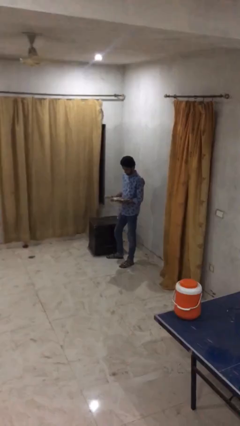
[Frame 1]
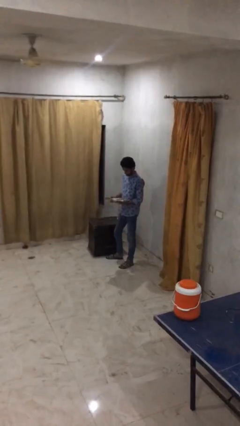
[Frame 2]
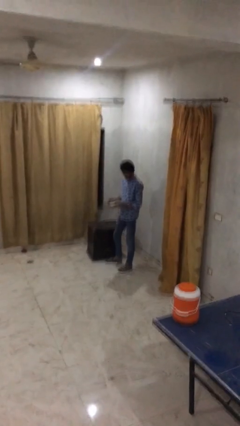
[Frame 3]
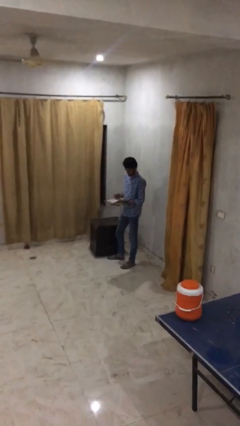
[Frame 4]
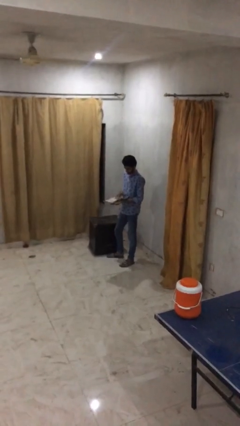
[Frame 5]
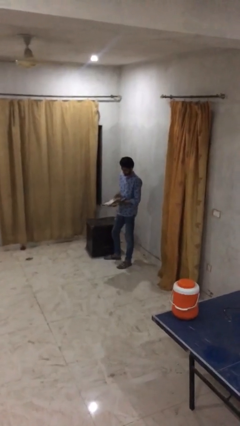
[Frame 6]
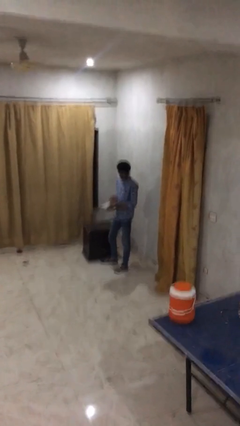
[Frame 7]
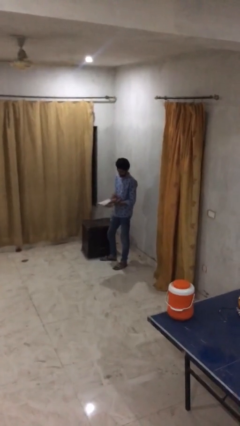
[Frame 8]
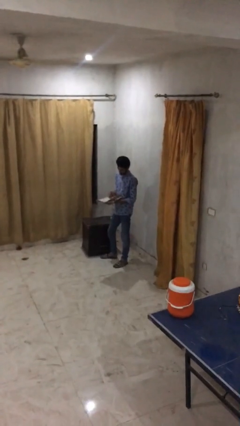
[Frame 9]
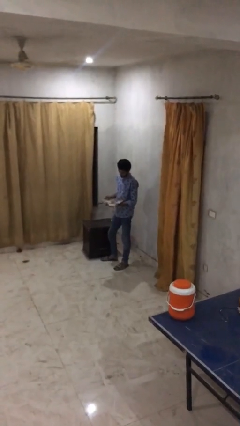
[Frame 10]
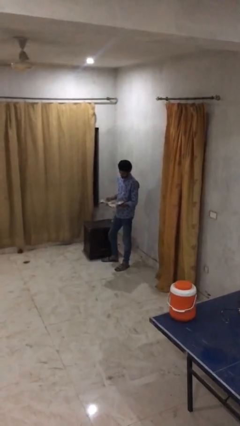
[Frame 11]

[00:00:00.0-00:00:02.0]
person reads document

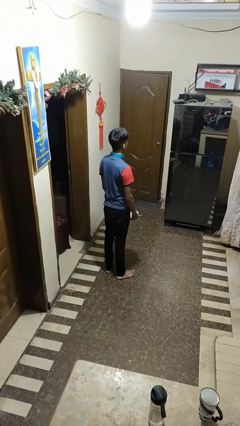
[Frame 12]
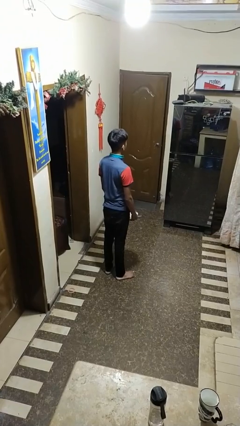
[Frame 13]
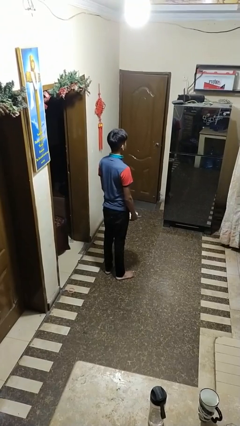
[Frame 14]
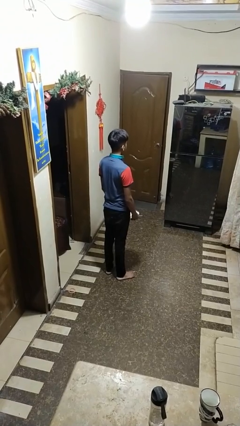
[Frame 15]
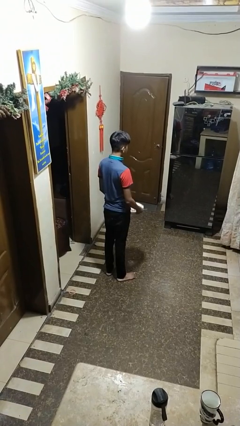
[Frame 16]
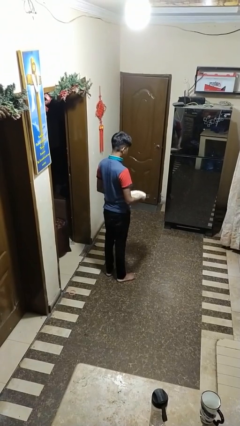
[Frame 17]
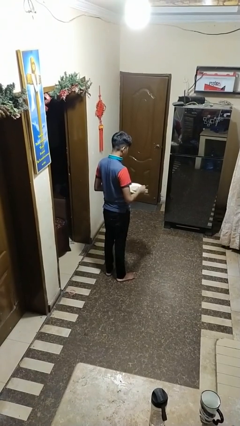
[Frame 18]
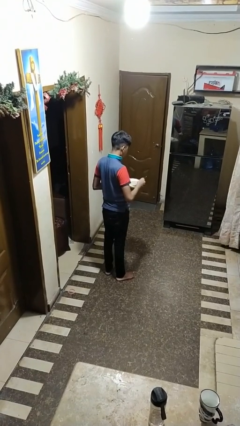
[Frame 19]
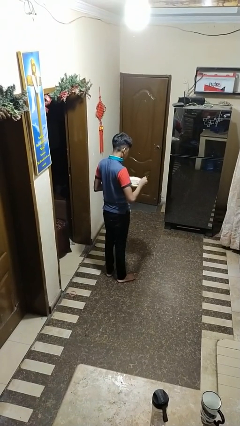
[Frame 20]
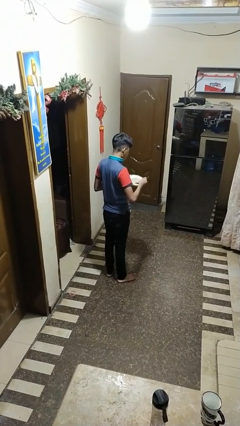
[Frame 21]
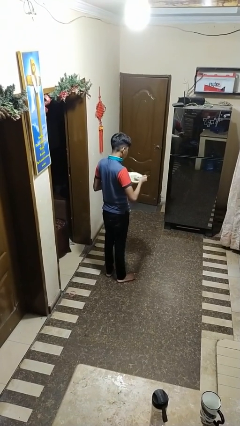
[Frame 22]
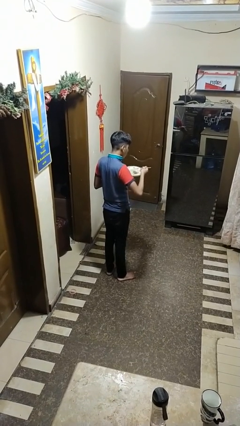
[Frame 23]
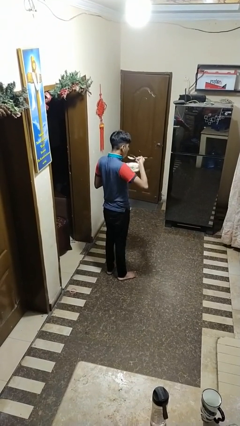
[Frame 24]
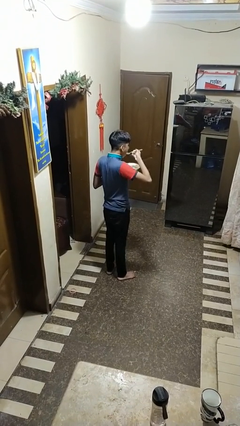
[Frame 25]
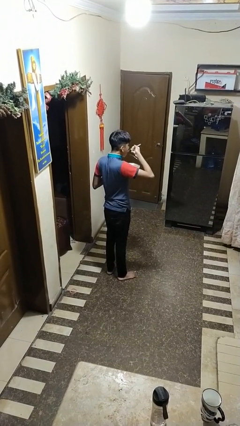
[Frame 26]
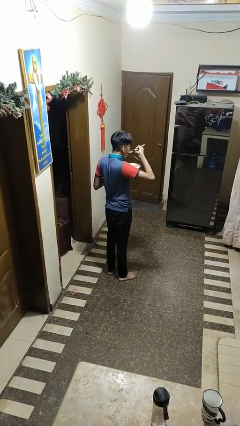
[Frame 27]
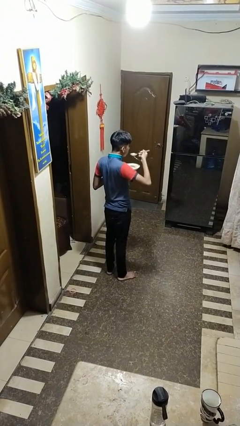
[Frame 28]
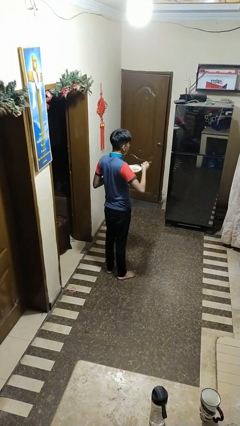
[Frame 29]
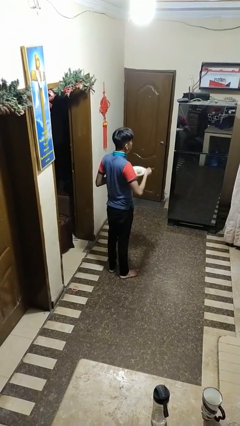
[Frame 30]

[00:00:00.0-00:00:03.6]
person eats with utensil

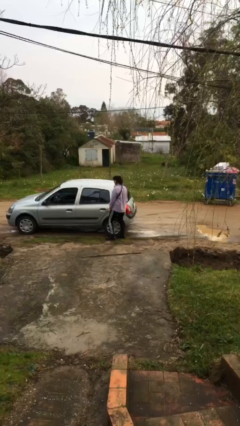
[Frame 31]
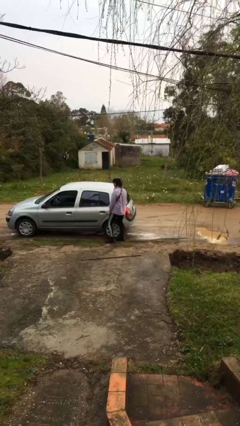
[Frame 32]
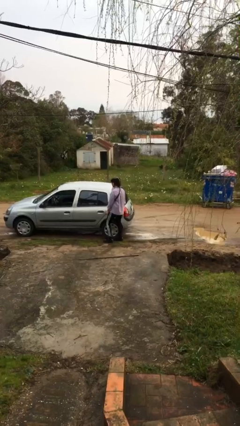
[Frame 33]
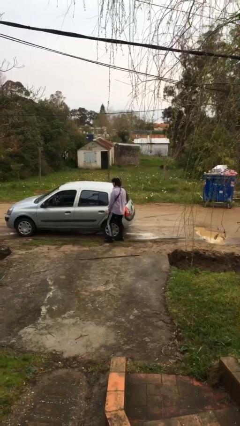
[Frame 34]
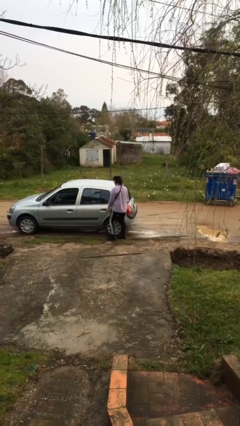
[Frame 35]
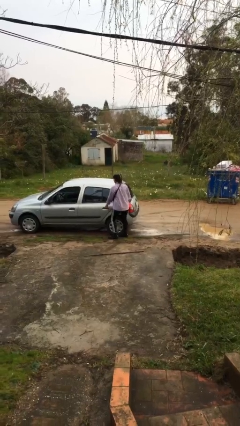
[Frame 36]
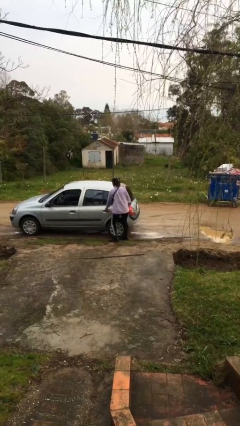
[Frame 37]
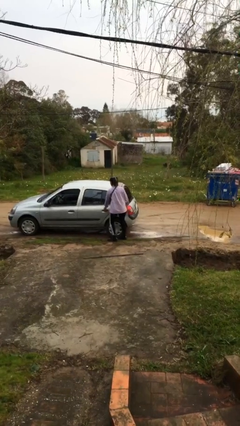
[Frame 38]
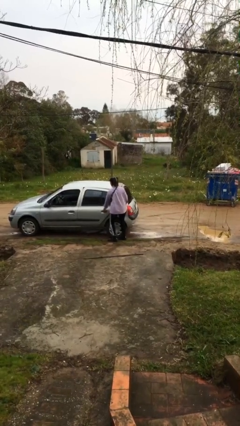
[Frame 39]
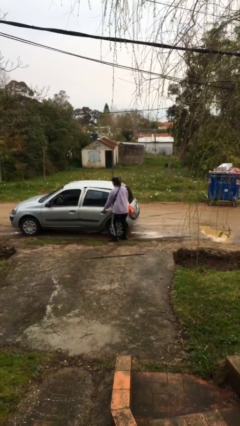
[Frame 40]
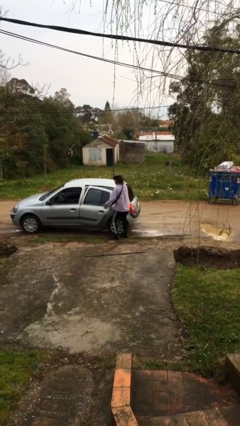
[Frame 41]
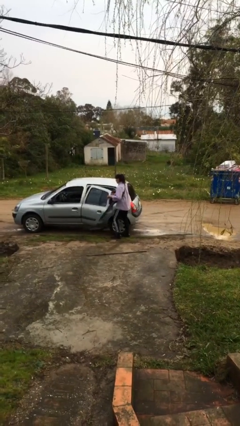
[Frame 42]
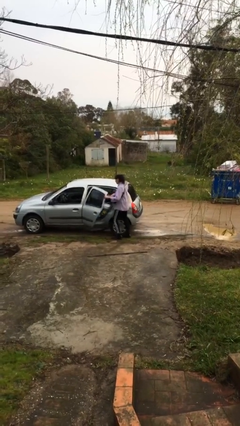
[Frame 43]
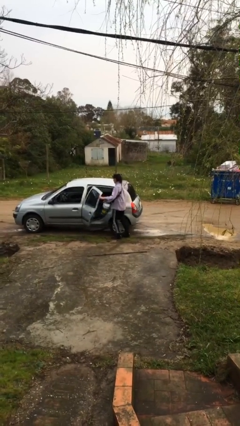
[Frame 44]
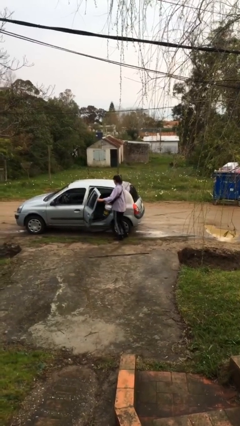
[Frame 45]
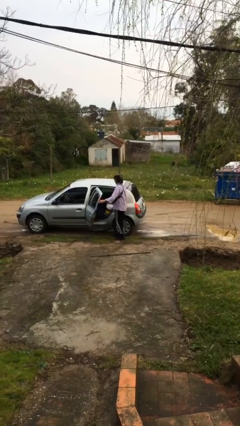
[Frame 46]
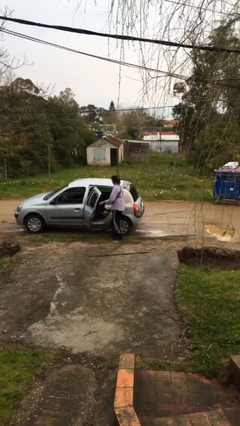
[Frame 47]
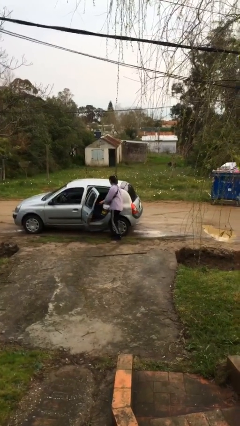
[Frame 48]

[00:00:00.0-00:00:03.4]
person opens car door

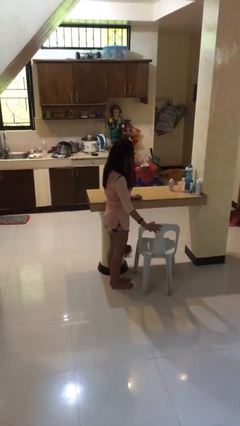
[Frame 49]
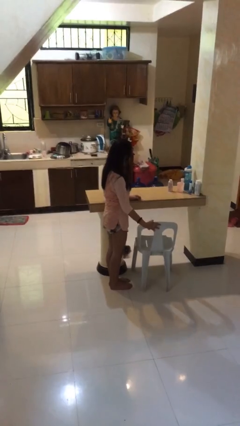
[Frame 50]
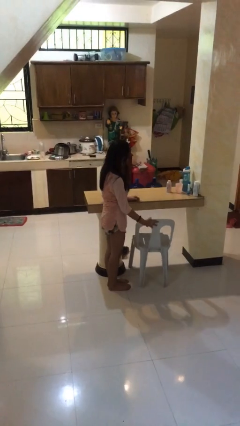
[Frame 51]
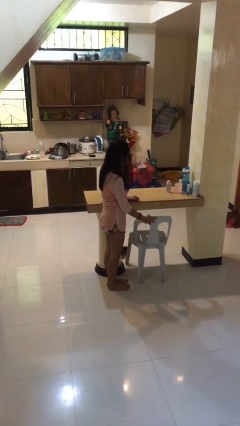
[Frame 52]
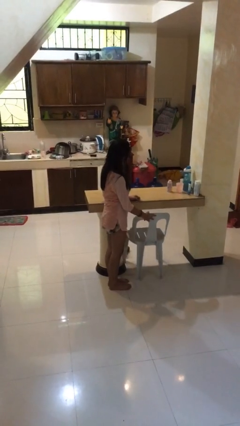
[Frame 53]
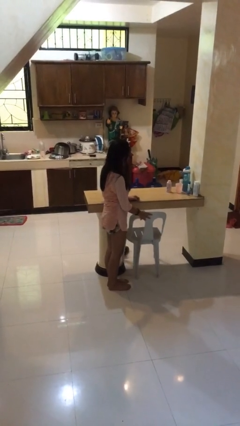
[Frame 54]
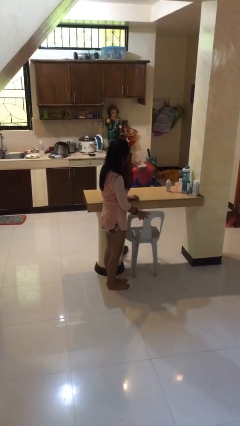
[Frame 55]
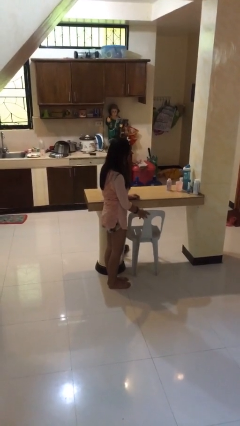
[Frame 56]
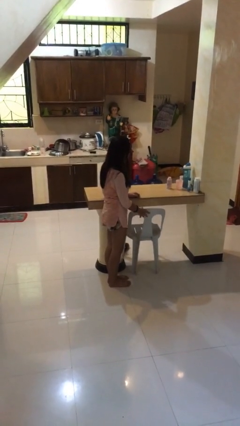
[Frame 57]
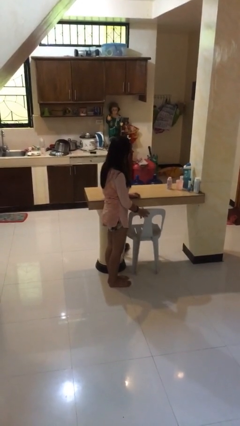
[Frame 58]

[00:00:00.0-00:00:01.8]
person pushes in chair

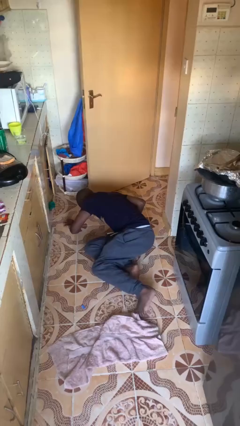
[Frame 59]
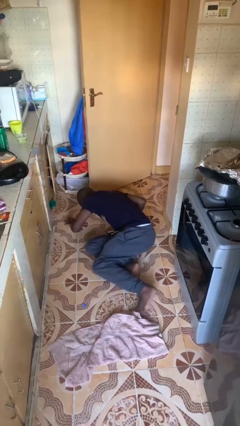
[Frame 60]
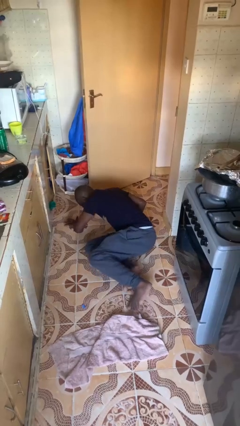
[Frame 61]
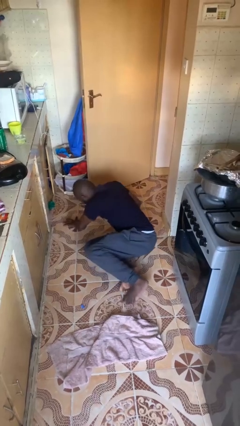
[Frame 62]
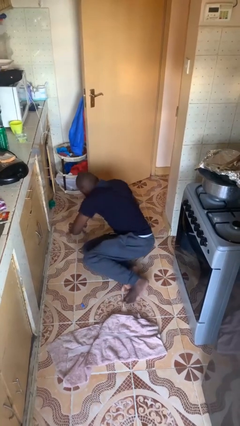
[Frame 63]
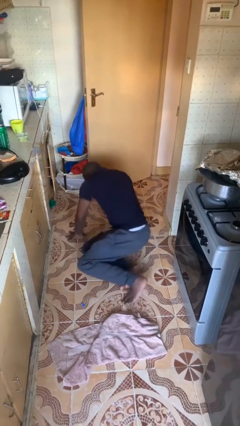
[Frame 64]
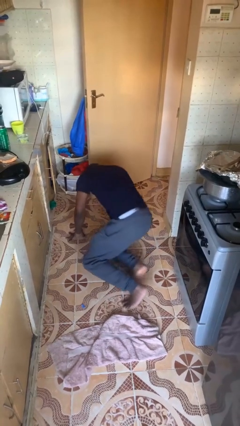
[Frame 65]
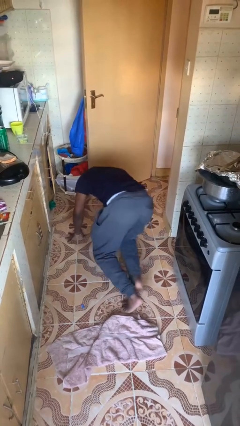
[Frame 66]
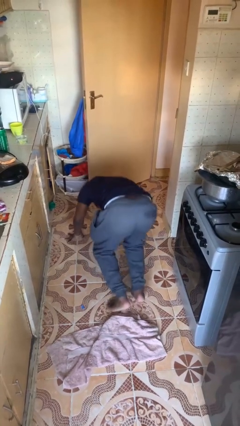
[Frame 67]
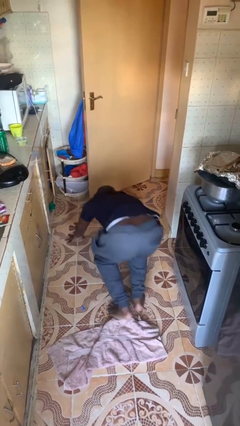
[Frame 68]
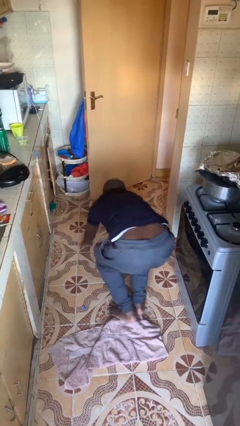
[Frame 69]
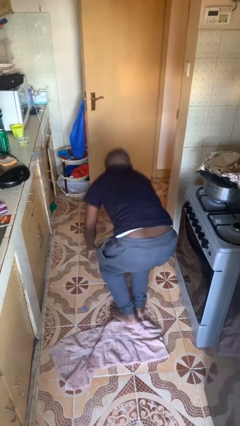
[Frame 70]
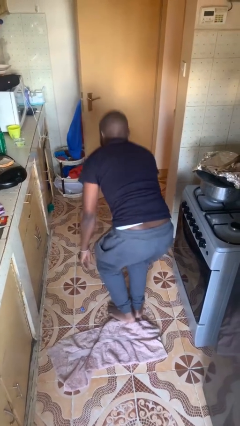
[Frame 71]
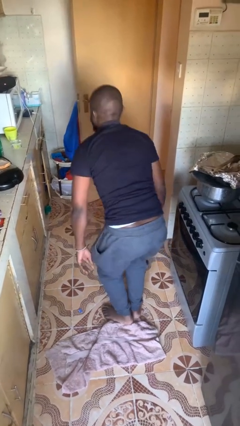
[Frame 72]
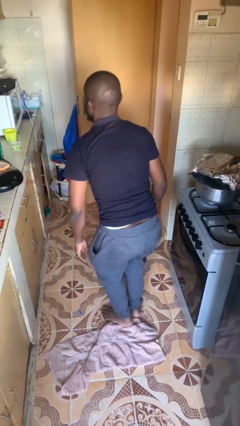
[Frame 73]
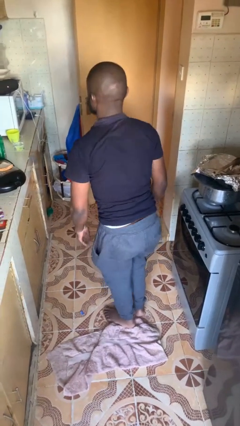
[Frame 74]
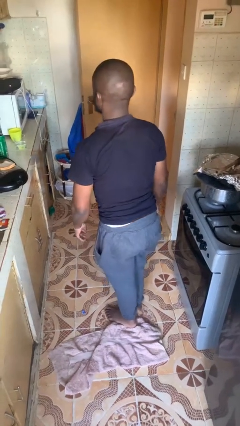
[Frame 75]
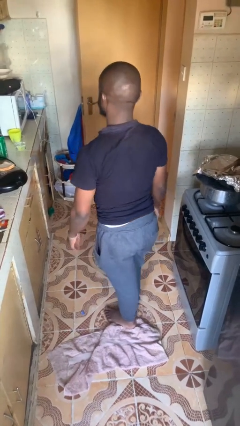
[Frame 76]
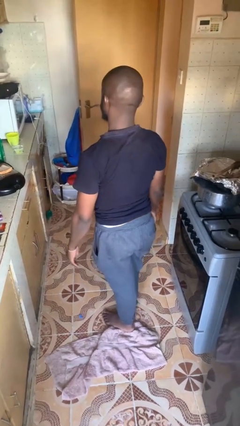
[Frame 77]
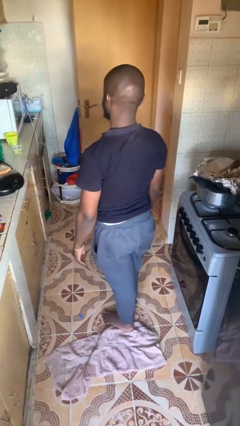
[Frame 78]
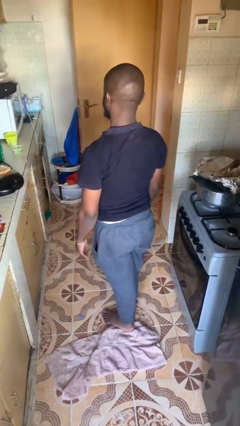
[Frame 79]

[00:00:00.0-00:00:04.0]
person stands up from floor

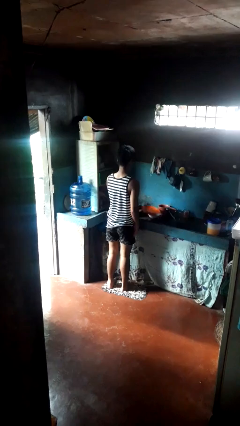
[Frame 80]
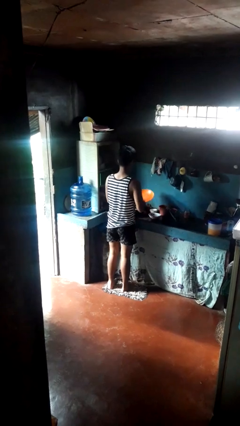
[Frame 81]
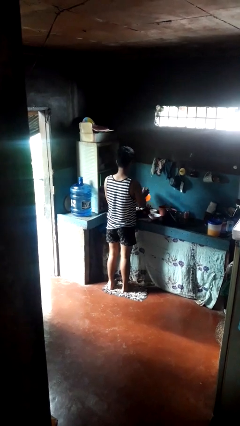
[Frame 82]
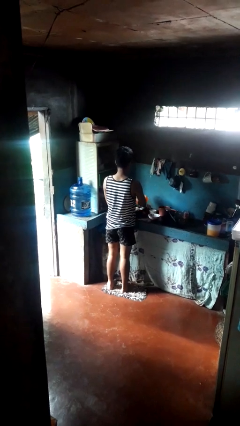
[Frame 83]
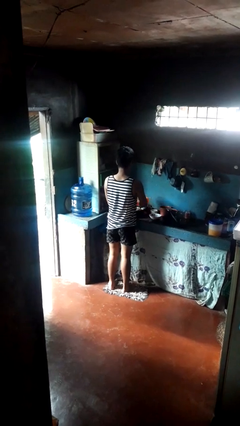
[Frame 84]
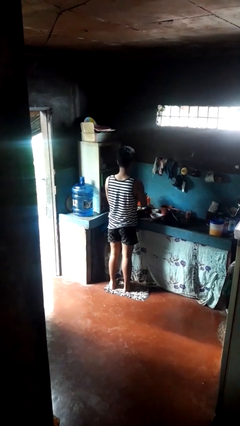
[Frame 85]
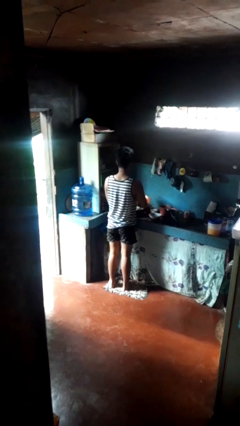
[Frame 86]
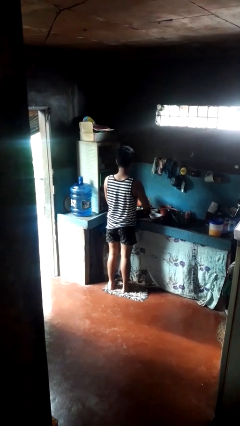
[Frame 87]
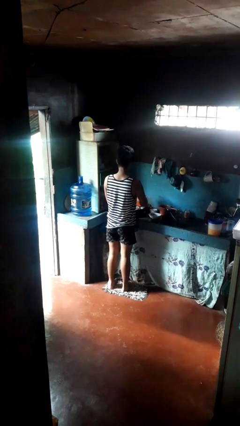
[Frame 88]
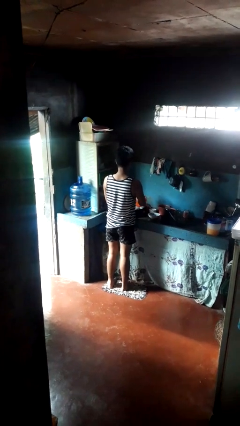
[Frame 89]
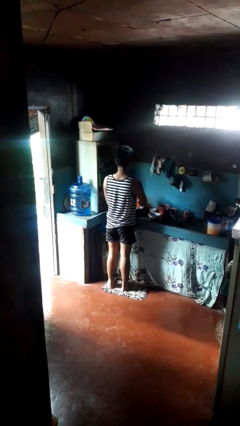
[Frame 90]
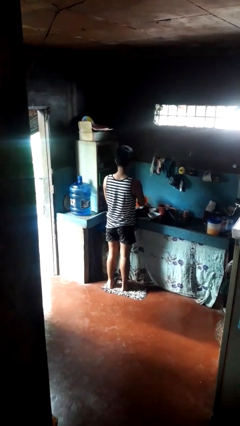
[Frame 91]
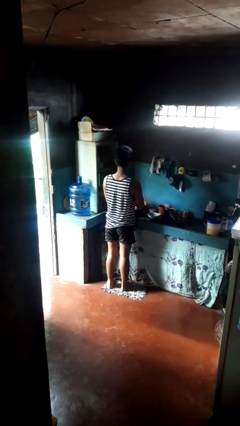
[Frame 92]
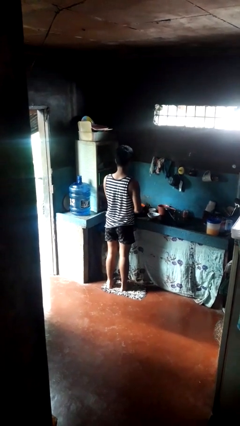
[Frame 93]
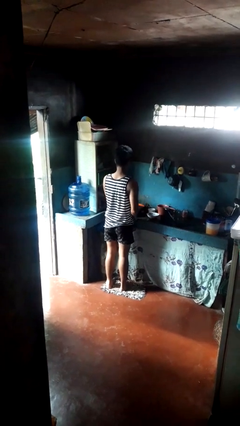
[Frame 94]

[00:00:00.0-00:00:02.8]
person washes dish
